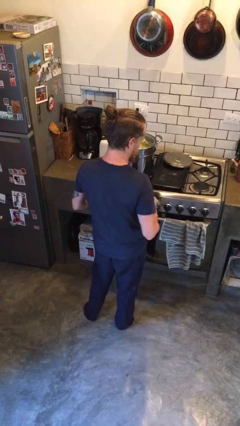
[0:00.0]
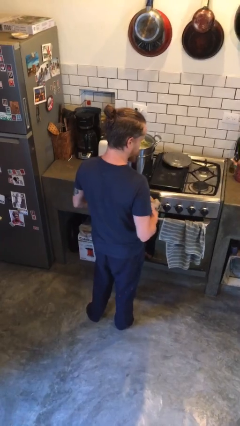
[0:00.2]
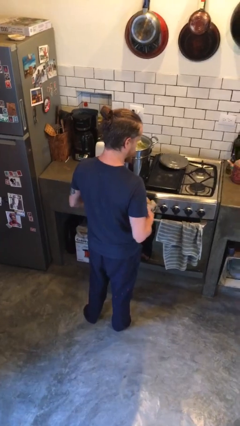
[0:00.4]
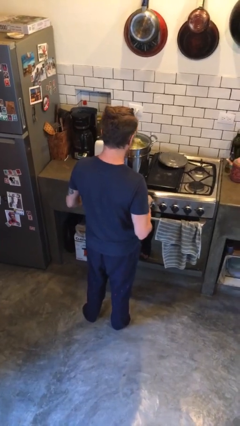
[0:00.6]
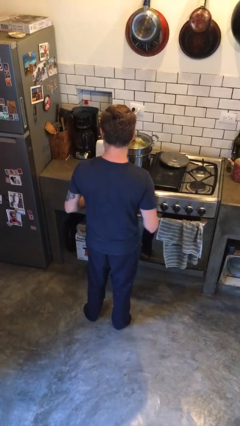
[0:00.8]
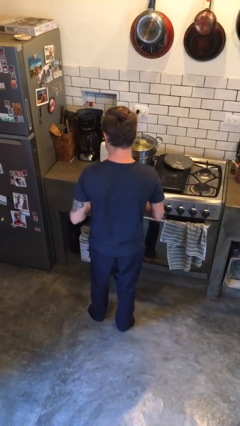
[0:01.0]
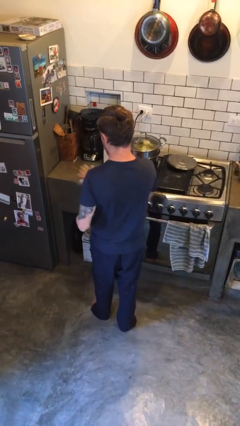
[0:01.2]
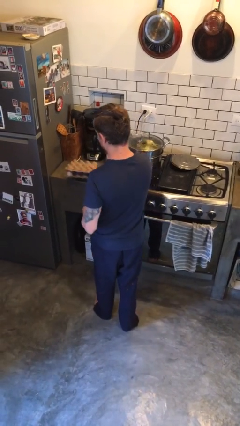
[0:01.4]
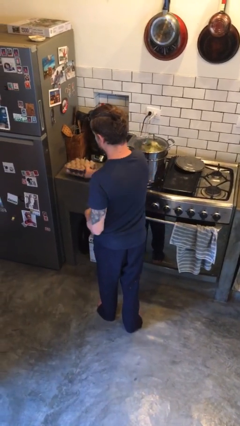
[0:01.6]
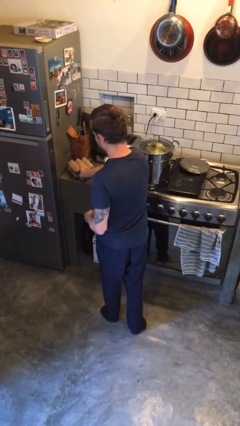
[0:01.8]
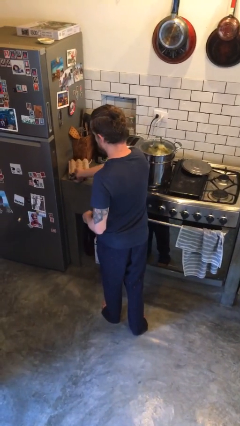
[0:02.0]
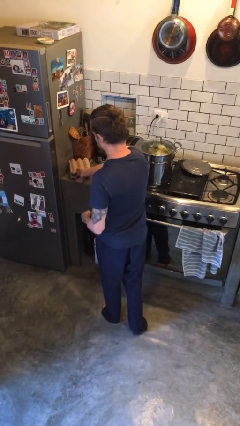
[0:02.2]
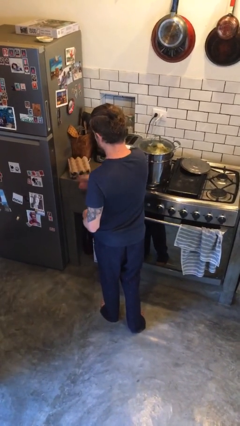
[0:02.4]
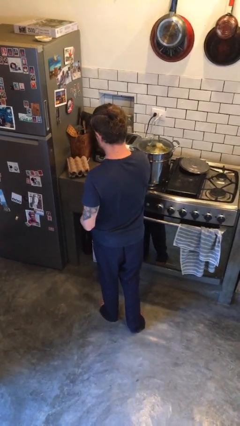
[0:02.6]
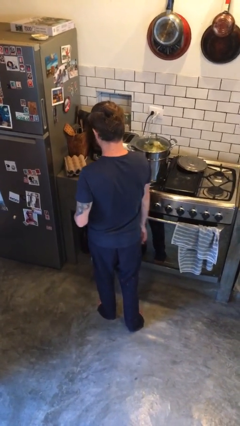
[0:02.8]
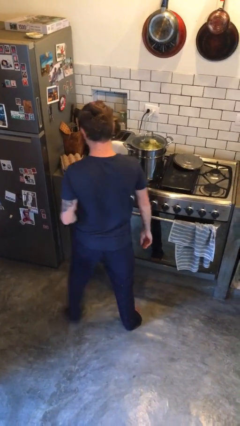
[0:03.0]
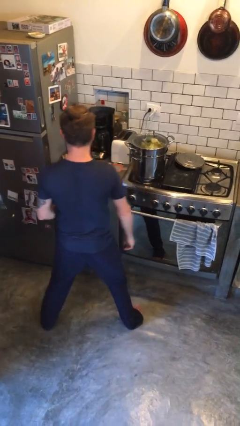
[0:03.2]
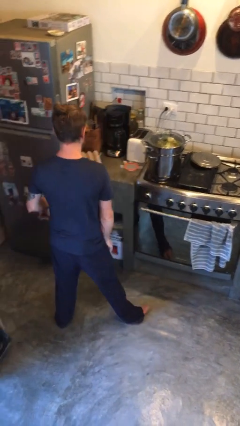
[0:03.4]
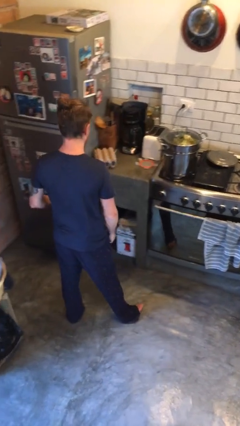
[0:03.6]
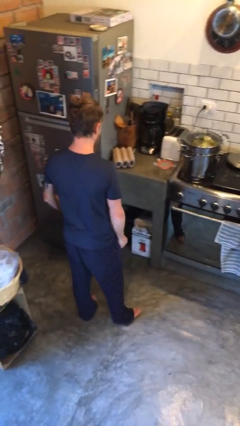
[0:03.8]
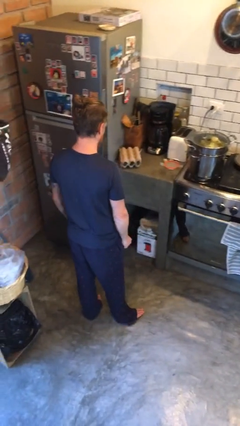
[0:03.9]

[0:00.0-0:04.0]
person puts down object on countertop

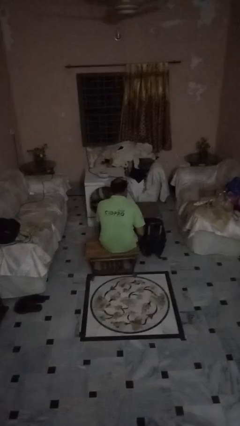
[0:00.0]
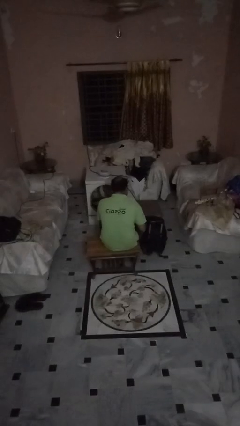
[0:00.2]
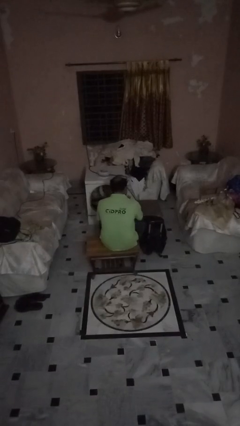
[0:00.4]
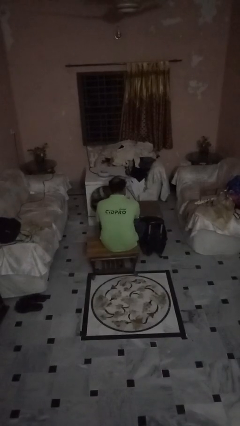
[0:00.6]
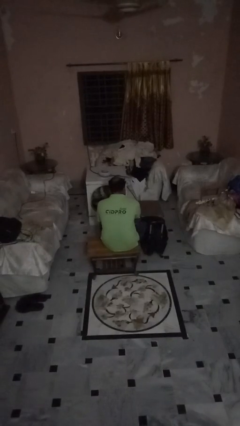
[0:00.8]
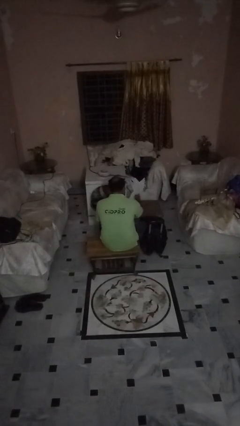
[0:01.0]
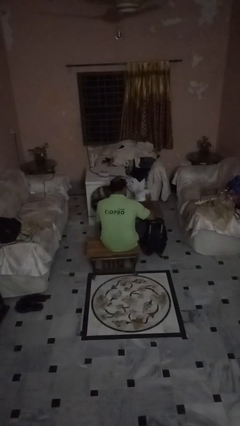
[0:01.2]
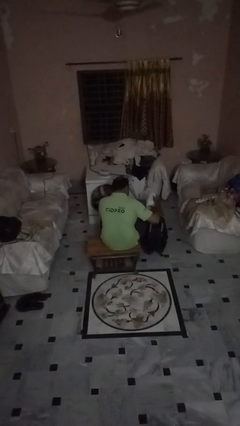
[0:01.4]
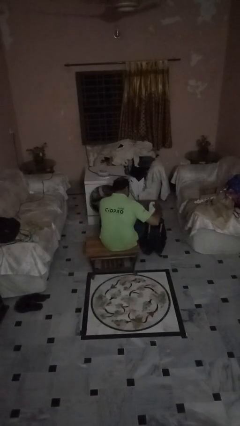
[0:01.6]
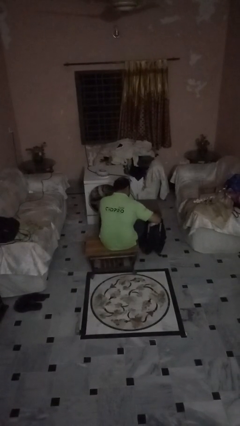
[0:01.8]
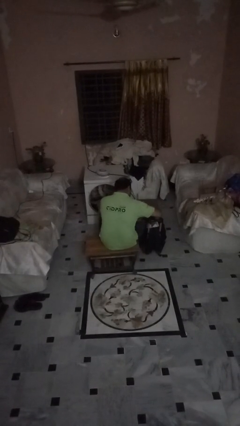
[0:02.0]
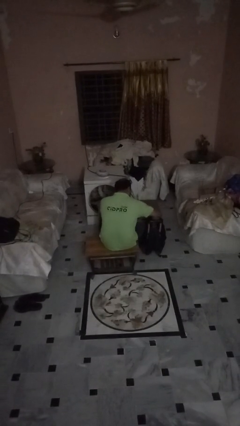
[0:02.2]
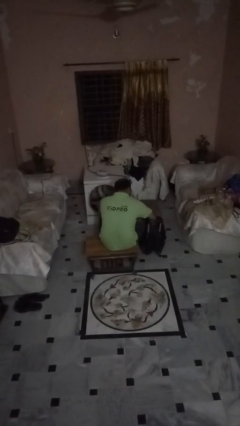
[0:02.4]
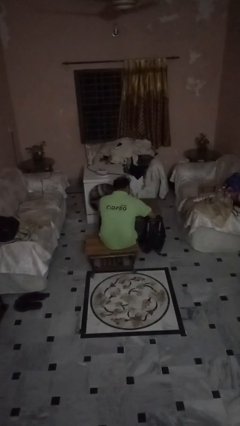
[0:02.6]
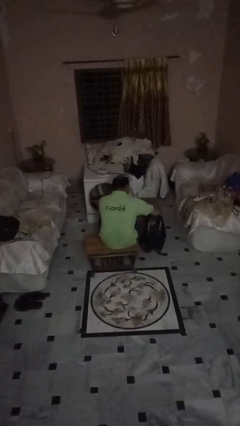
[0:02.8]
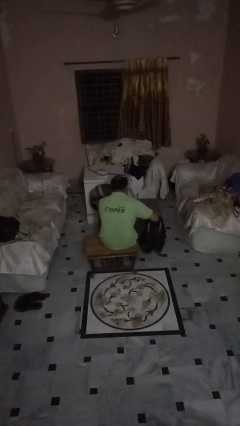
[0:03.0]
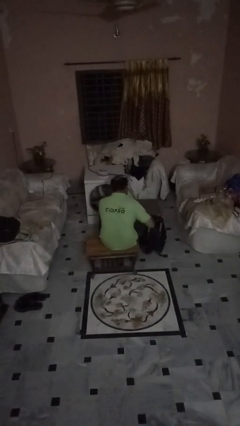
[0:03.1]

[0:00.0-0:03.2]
person loads clothes into suitcase

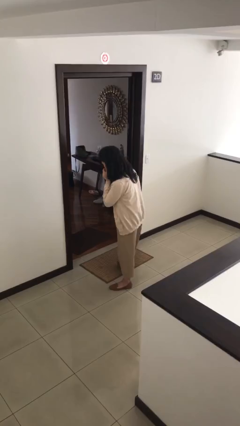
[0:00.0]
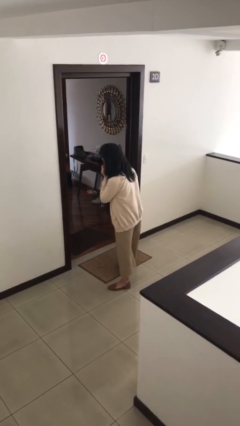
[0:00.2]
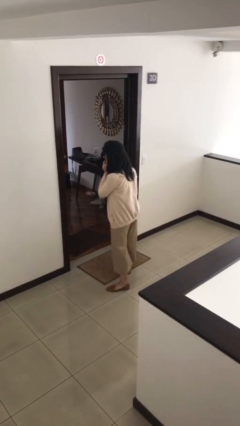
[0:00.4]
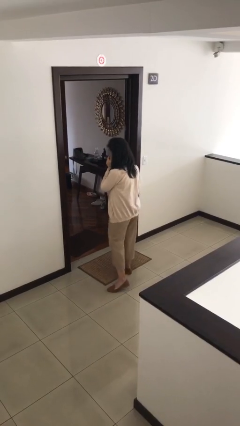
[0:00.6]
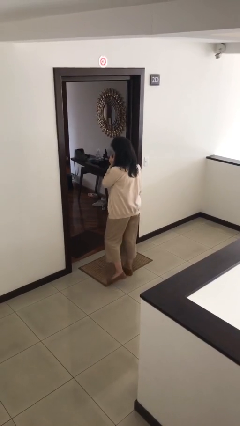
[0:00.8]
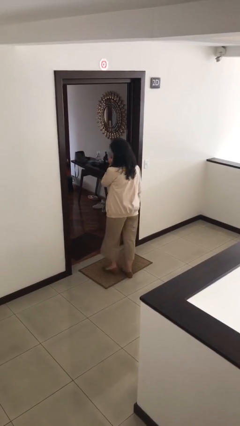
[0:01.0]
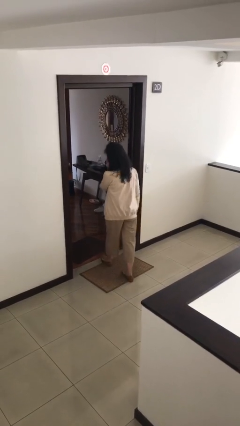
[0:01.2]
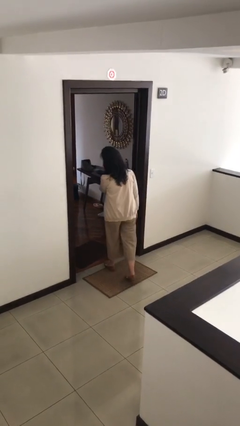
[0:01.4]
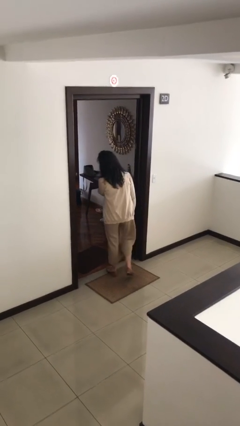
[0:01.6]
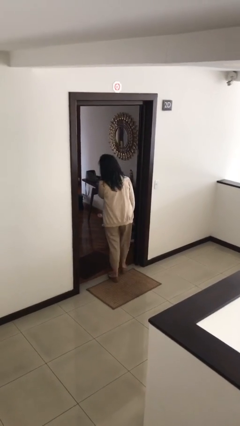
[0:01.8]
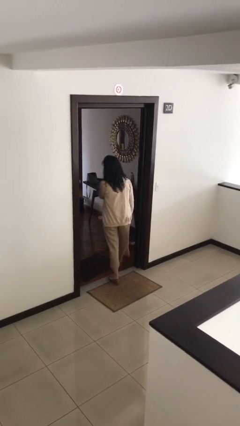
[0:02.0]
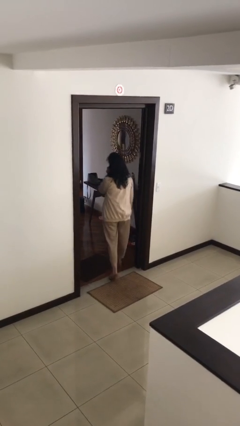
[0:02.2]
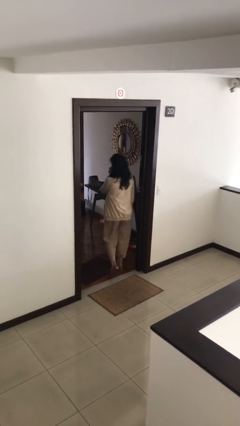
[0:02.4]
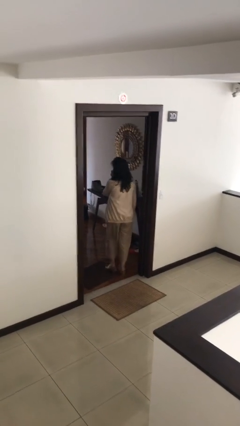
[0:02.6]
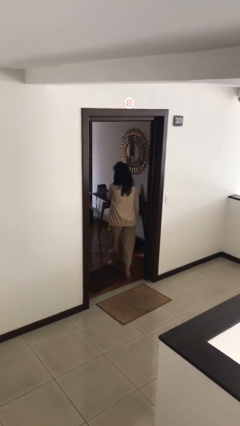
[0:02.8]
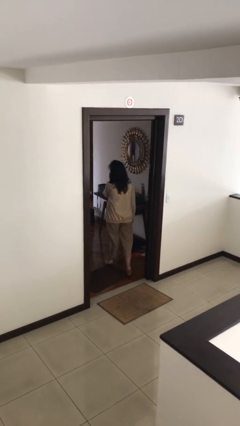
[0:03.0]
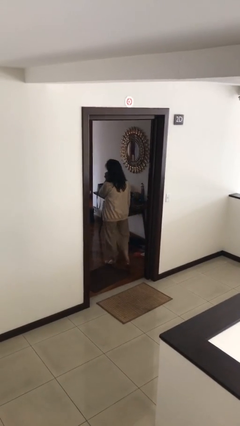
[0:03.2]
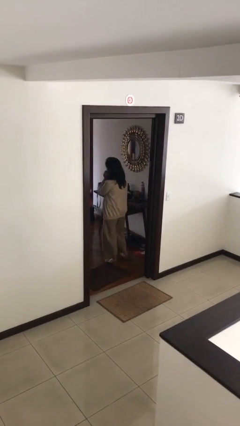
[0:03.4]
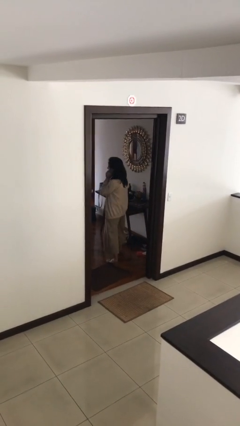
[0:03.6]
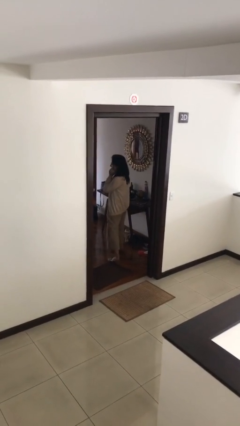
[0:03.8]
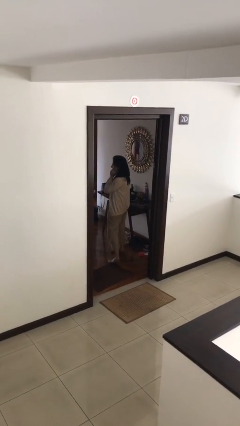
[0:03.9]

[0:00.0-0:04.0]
person exits scene through structure

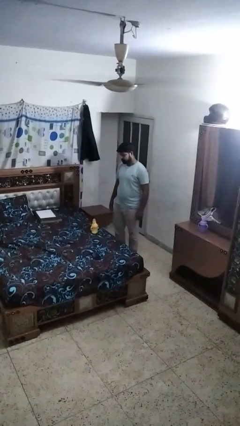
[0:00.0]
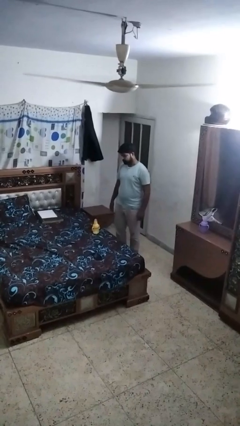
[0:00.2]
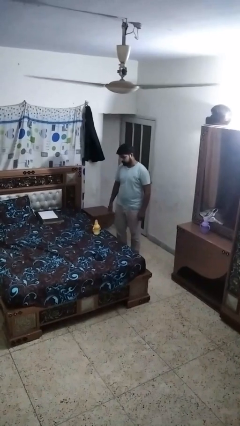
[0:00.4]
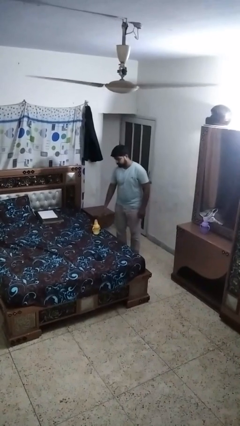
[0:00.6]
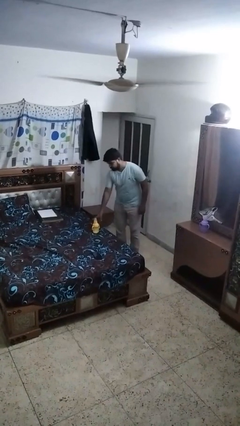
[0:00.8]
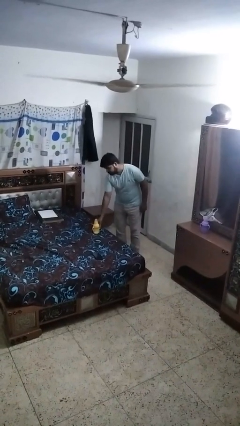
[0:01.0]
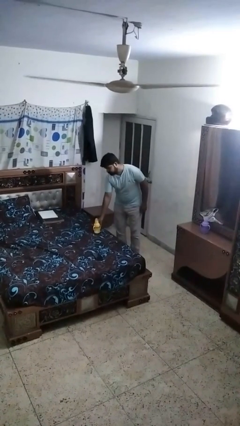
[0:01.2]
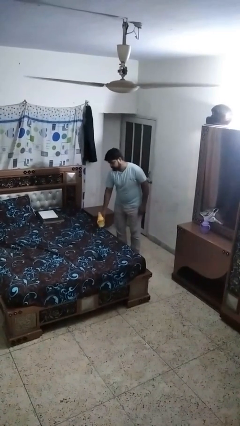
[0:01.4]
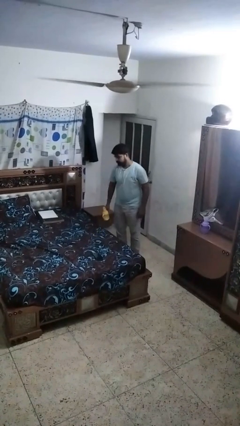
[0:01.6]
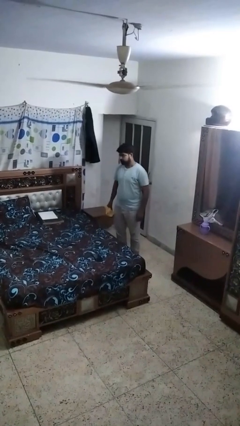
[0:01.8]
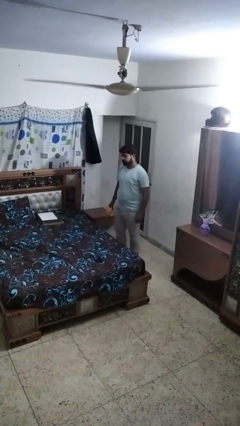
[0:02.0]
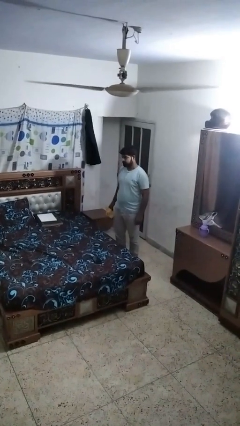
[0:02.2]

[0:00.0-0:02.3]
person picks up object from bed

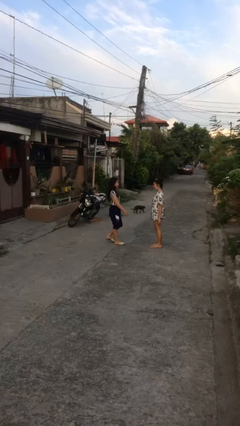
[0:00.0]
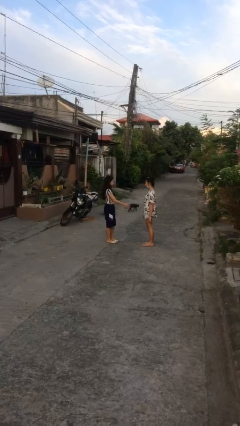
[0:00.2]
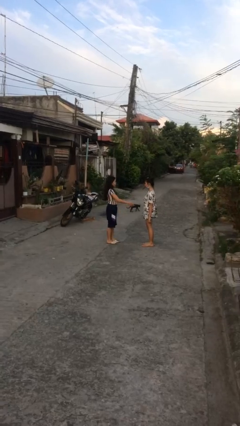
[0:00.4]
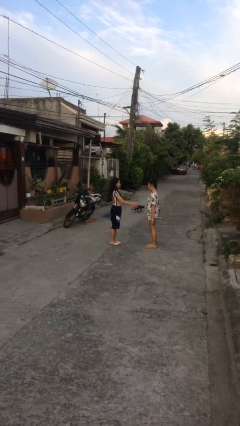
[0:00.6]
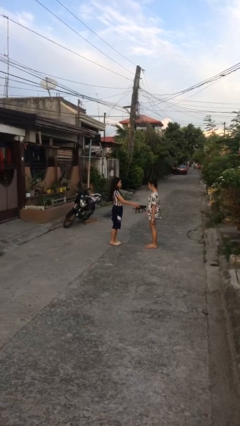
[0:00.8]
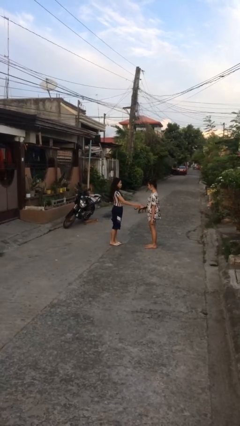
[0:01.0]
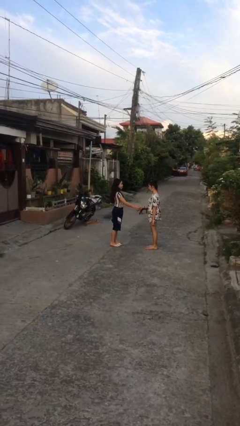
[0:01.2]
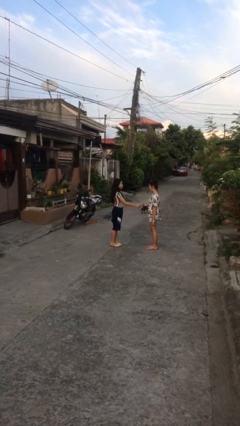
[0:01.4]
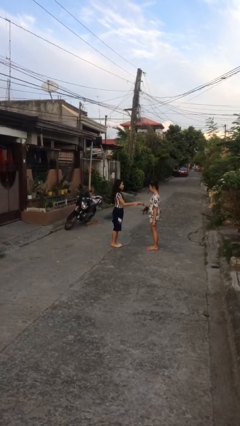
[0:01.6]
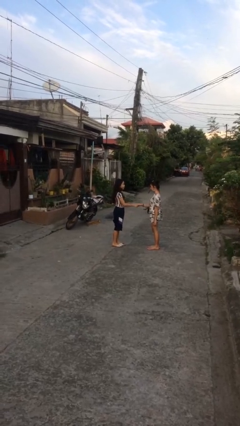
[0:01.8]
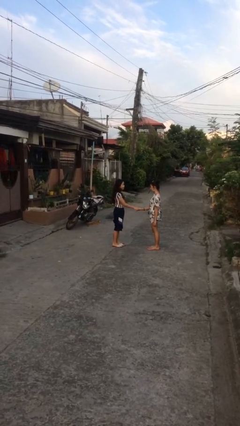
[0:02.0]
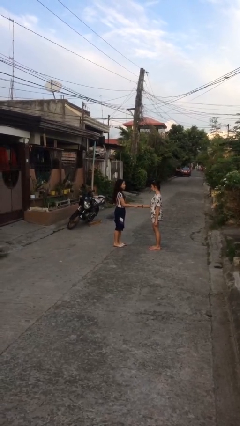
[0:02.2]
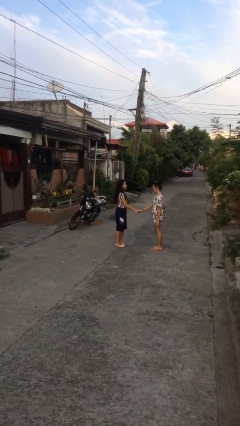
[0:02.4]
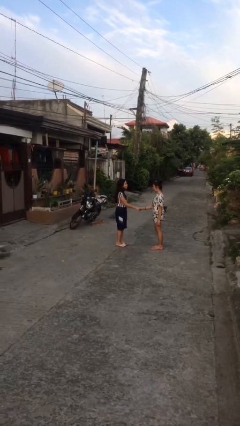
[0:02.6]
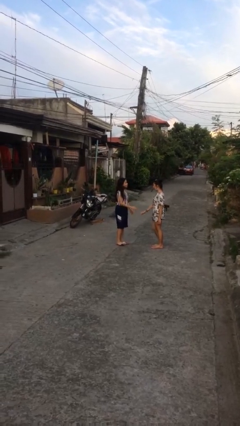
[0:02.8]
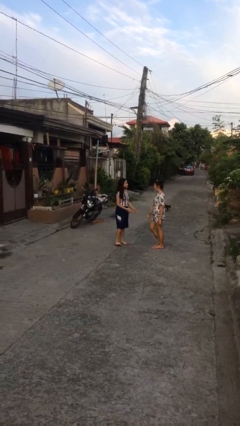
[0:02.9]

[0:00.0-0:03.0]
person shakes hand

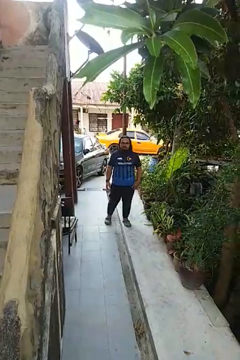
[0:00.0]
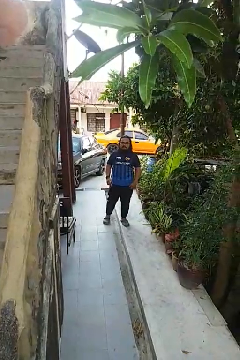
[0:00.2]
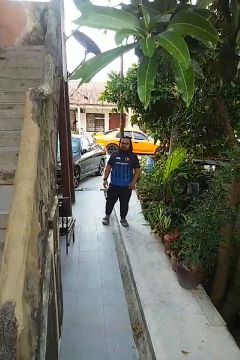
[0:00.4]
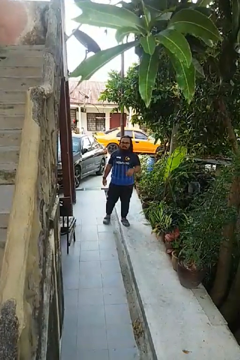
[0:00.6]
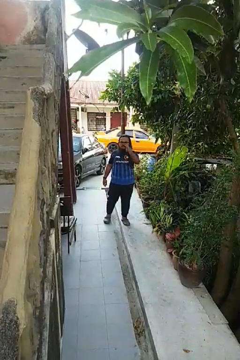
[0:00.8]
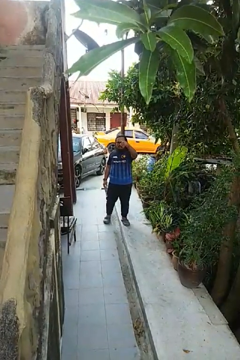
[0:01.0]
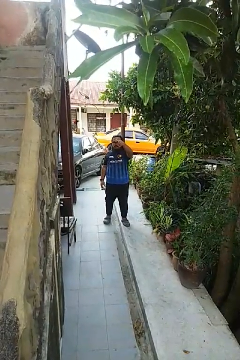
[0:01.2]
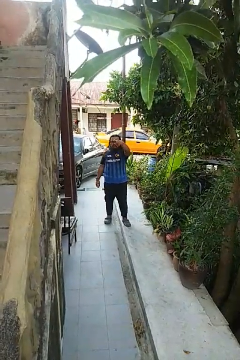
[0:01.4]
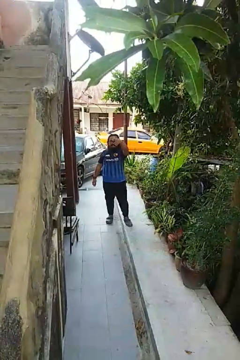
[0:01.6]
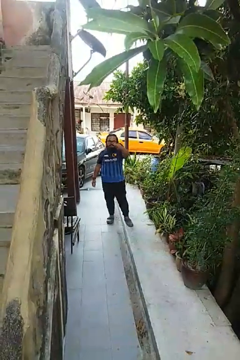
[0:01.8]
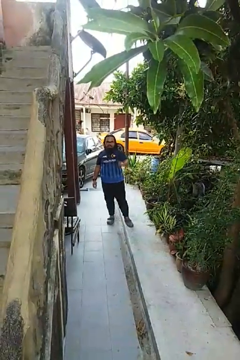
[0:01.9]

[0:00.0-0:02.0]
person gestures come here
